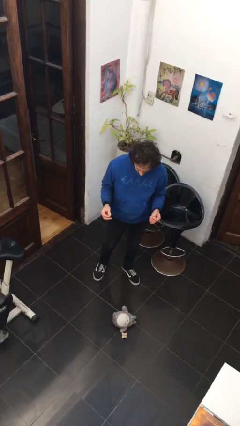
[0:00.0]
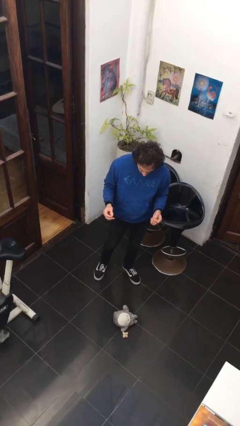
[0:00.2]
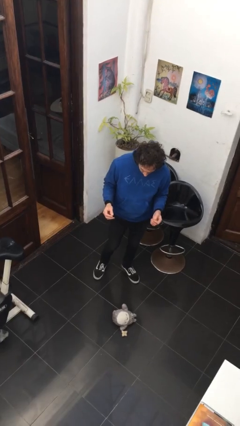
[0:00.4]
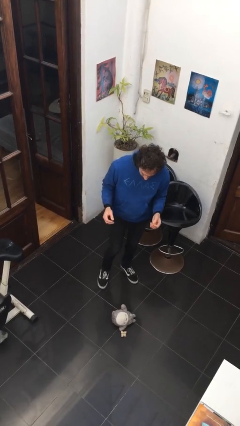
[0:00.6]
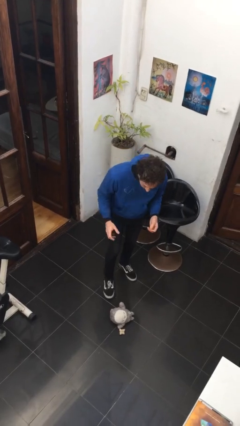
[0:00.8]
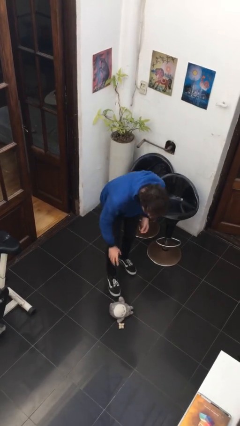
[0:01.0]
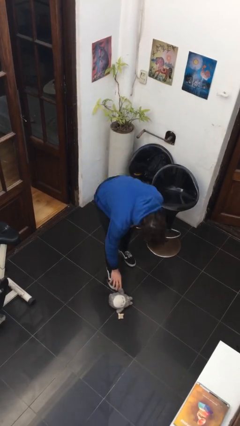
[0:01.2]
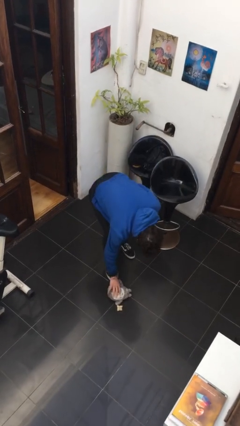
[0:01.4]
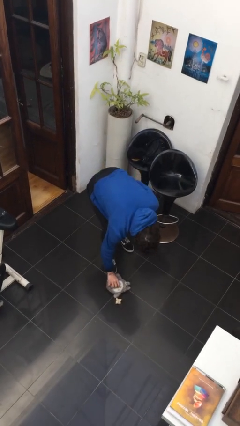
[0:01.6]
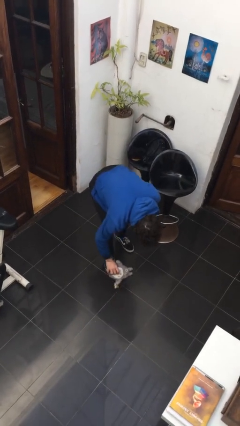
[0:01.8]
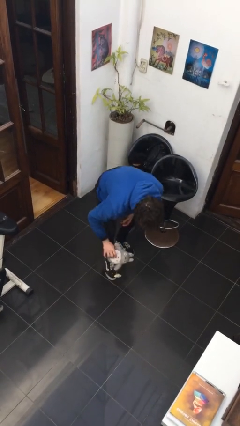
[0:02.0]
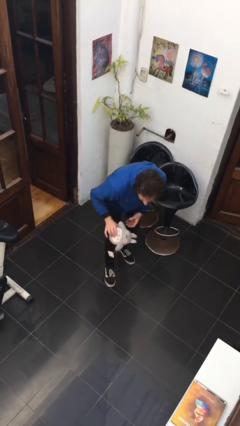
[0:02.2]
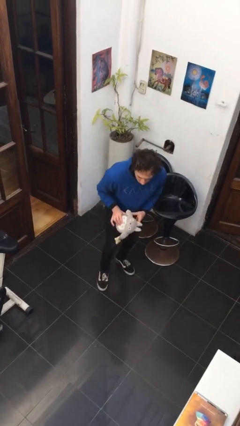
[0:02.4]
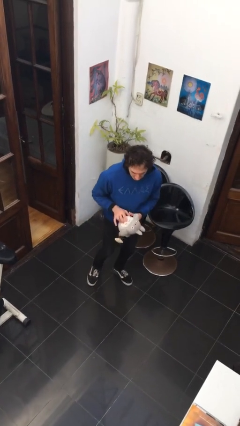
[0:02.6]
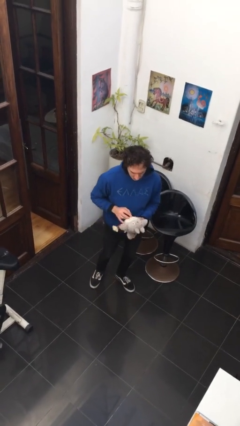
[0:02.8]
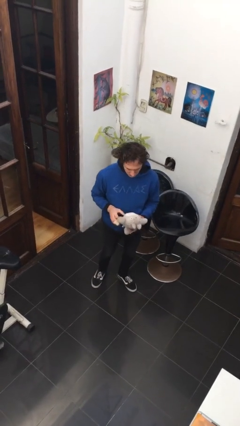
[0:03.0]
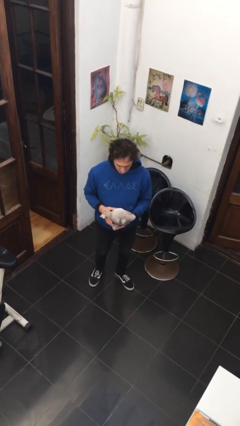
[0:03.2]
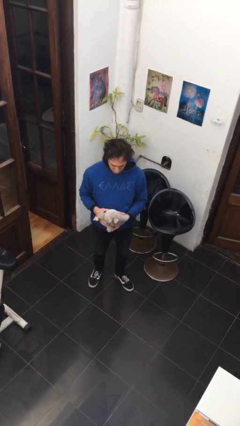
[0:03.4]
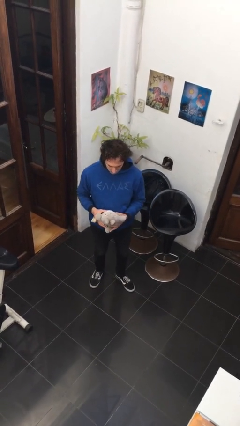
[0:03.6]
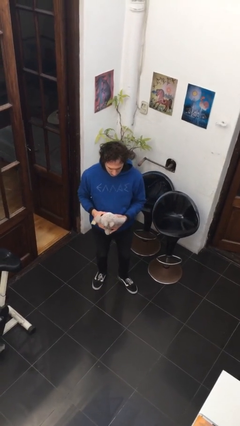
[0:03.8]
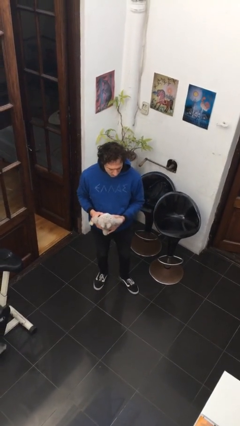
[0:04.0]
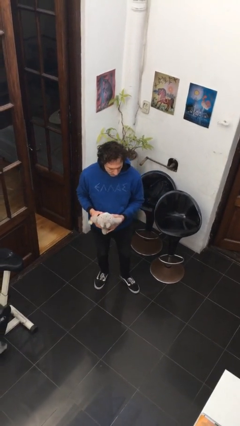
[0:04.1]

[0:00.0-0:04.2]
person picks up object from floor

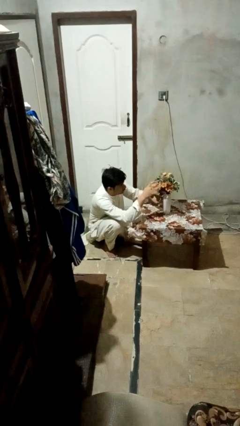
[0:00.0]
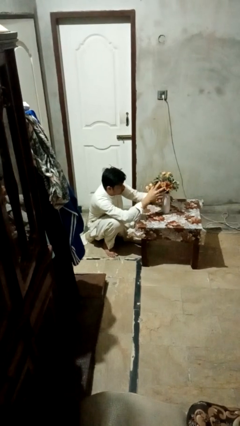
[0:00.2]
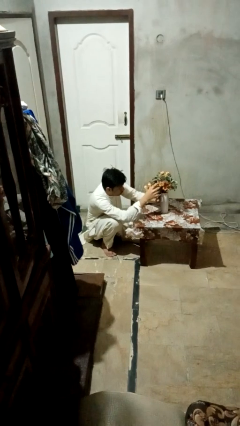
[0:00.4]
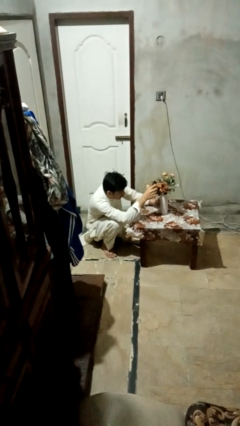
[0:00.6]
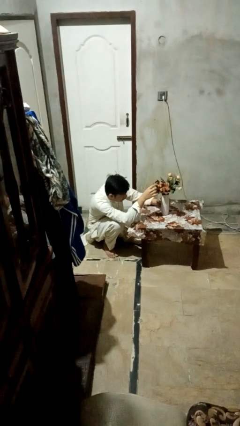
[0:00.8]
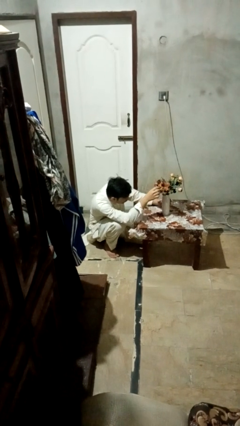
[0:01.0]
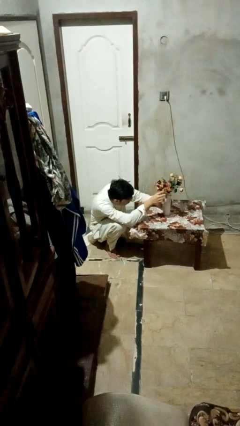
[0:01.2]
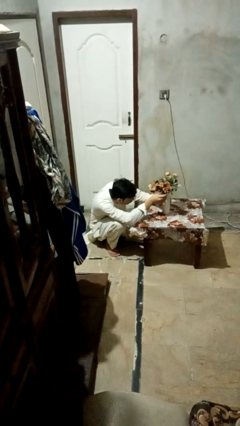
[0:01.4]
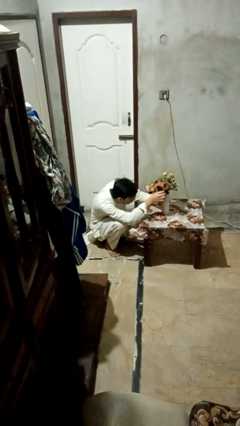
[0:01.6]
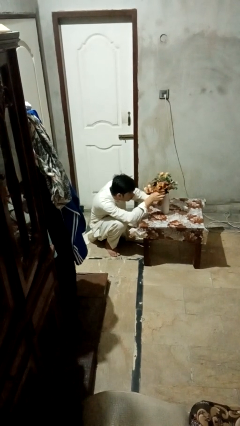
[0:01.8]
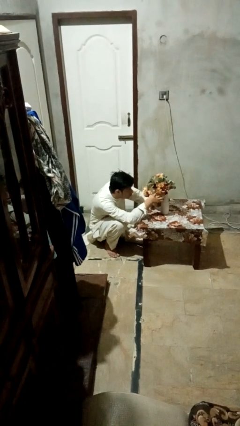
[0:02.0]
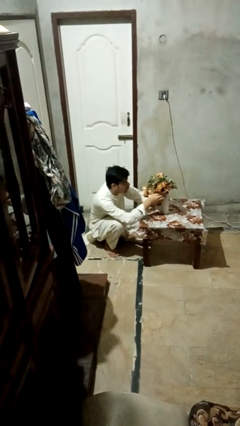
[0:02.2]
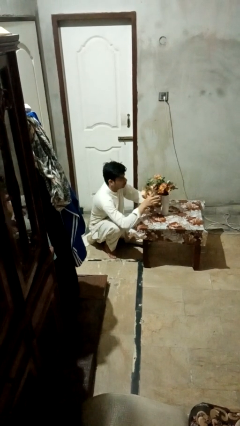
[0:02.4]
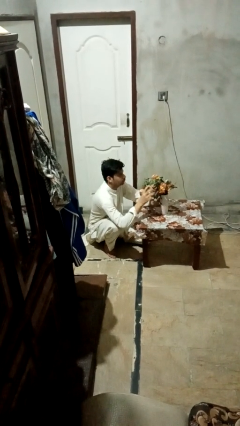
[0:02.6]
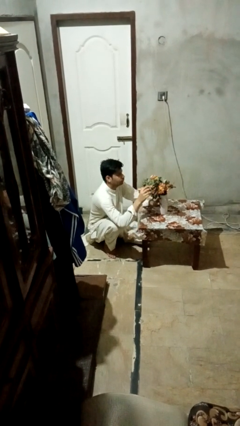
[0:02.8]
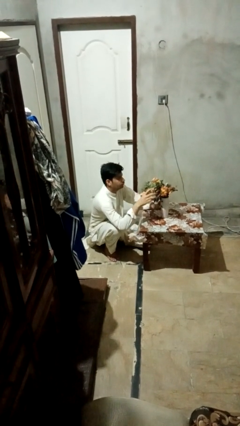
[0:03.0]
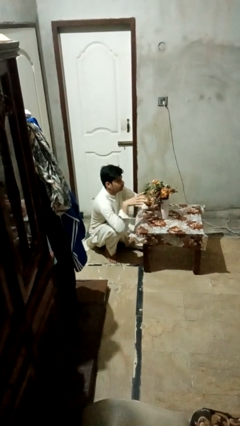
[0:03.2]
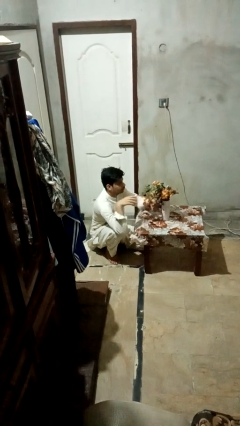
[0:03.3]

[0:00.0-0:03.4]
person arranges flowers in vase

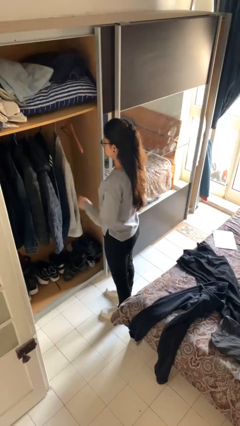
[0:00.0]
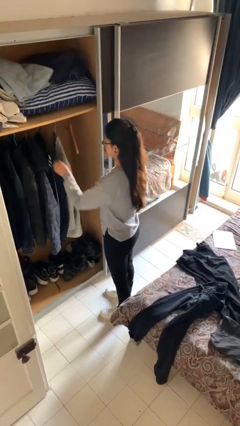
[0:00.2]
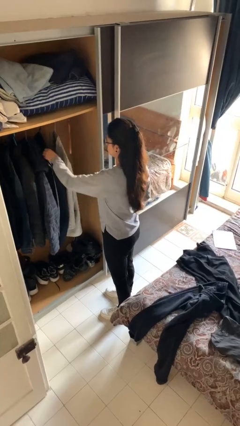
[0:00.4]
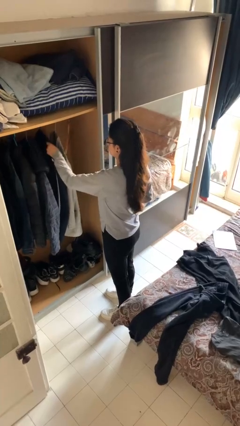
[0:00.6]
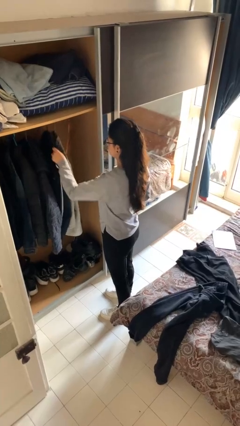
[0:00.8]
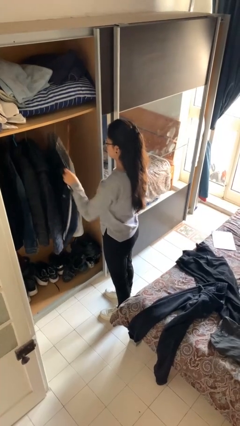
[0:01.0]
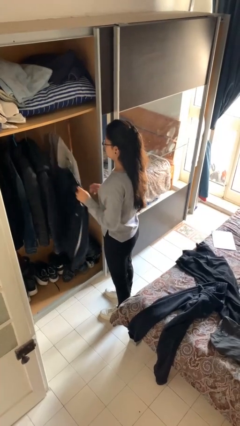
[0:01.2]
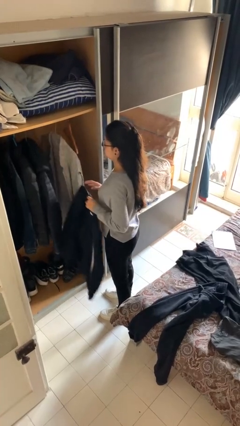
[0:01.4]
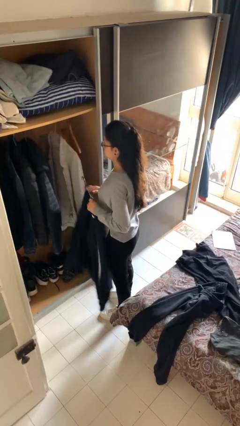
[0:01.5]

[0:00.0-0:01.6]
person takes clothes from closet

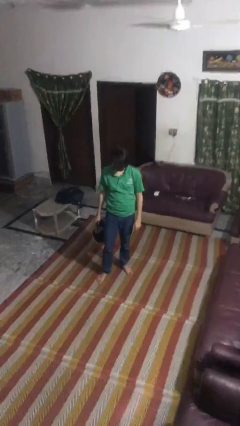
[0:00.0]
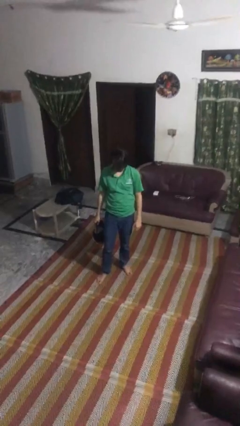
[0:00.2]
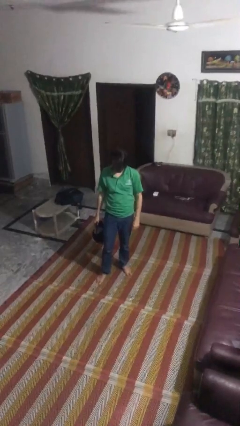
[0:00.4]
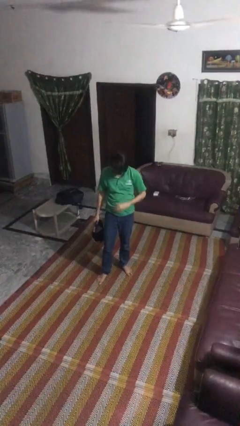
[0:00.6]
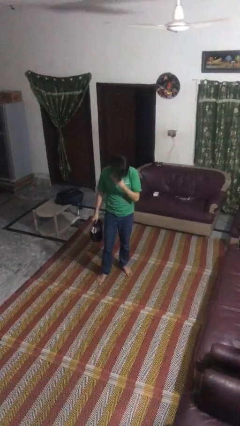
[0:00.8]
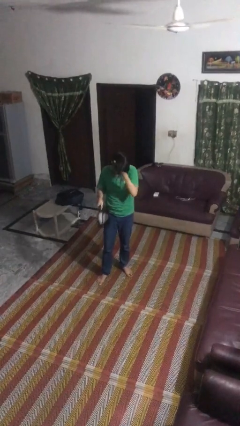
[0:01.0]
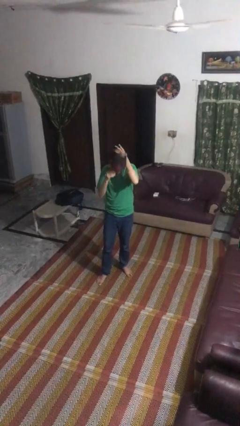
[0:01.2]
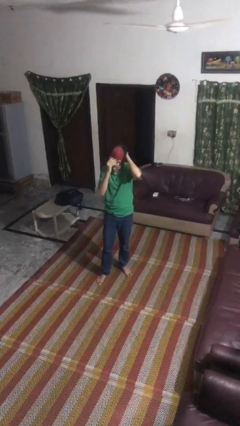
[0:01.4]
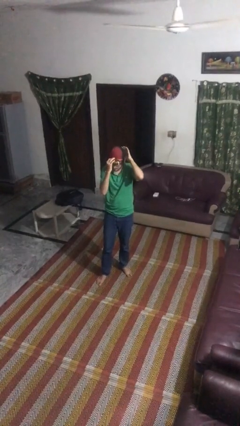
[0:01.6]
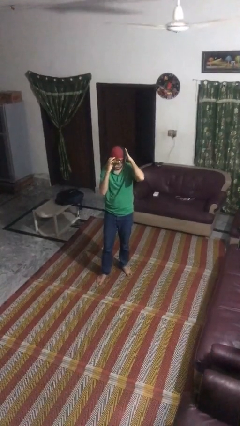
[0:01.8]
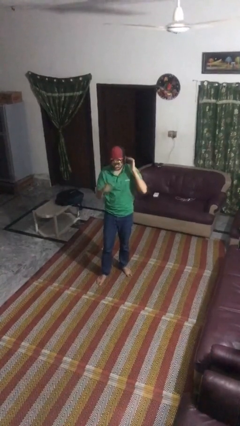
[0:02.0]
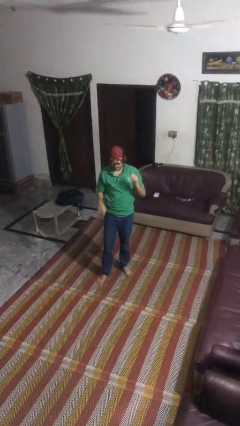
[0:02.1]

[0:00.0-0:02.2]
person puts on hat

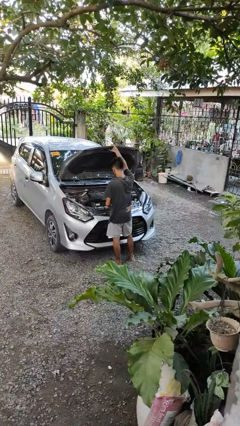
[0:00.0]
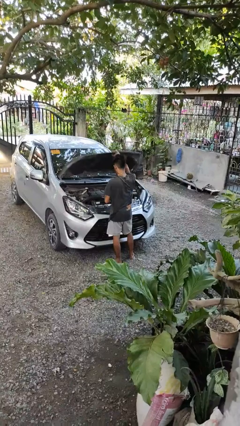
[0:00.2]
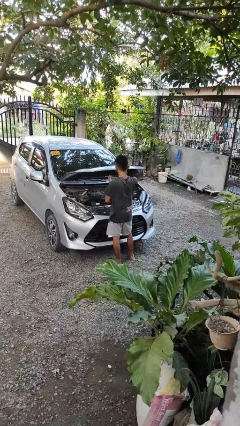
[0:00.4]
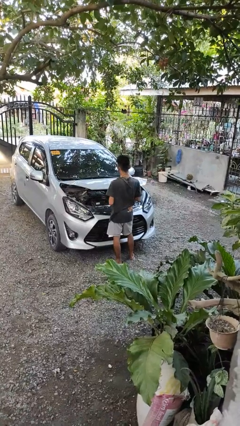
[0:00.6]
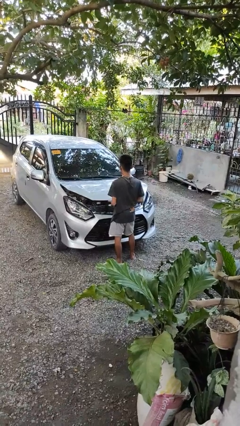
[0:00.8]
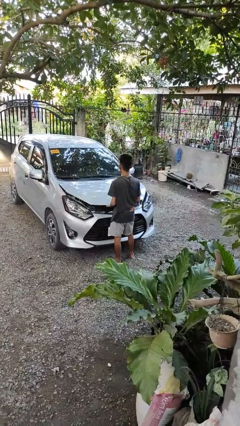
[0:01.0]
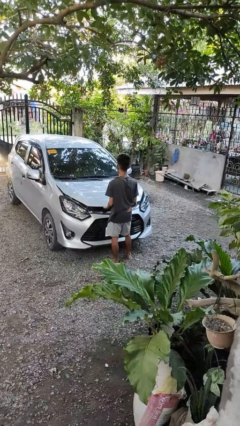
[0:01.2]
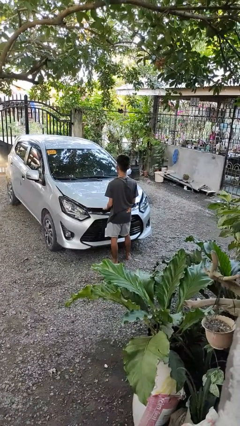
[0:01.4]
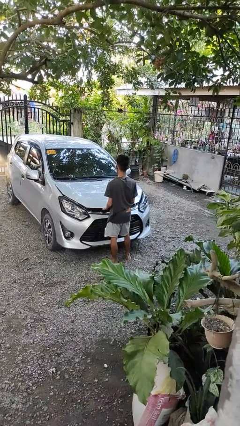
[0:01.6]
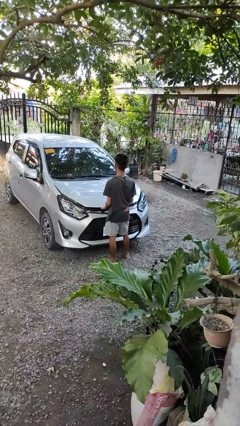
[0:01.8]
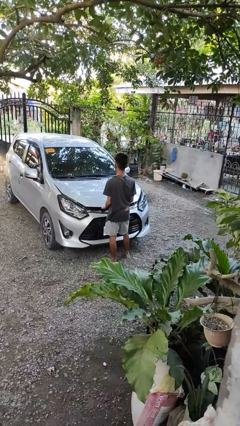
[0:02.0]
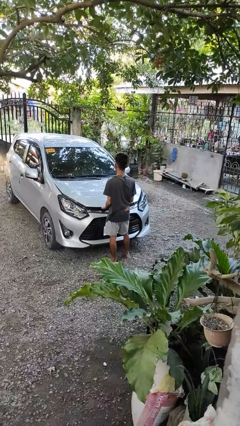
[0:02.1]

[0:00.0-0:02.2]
person closes car hood

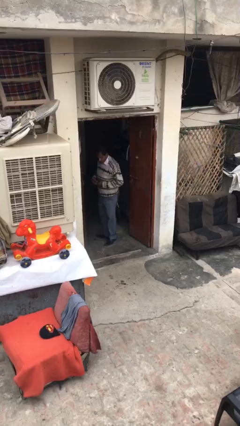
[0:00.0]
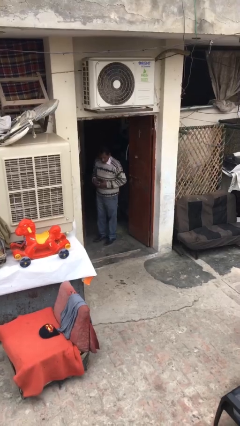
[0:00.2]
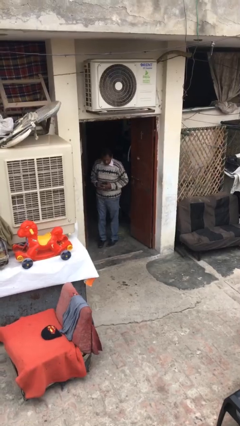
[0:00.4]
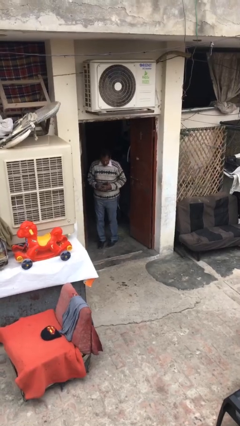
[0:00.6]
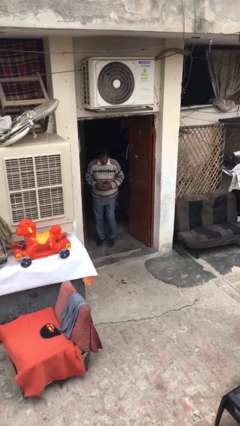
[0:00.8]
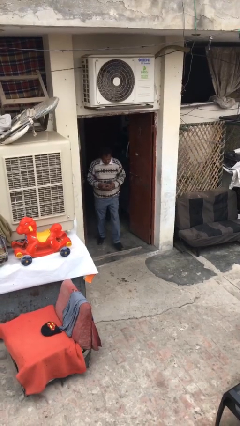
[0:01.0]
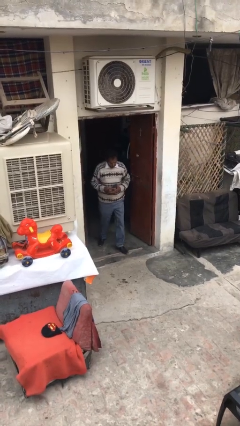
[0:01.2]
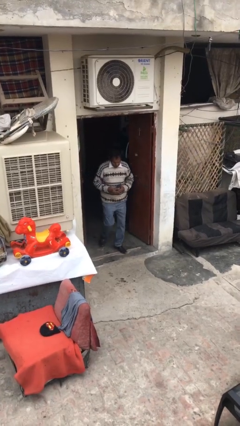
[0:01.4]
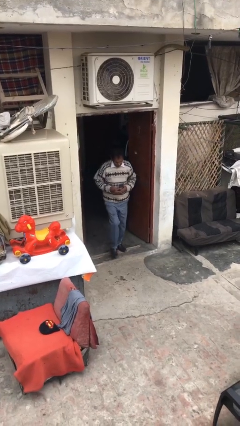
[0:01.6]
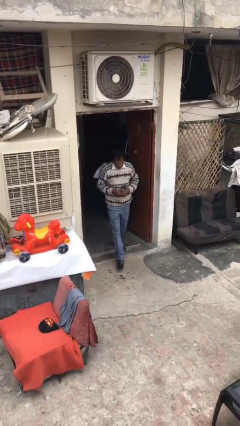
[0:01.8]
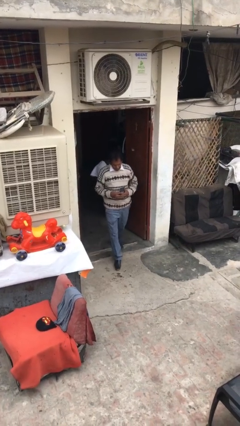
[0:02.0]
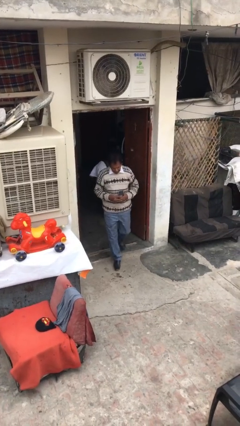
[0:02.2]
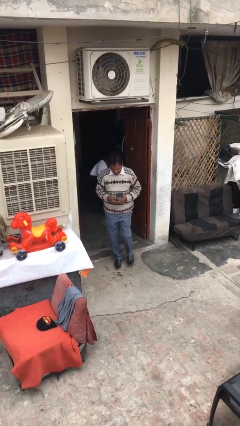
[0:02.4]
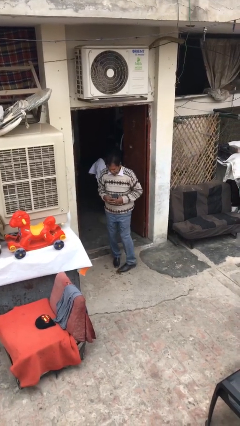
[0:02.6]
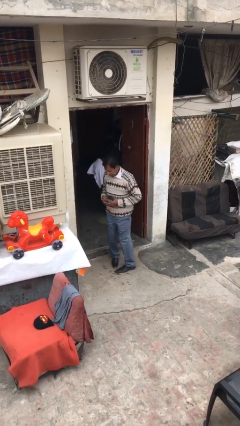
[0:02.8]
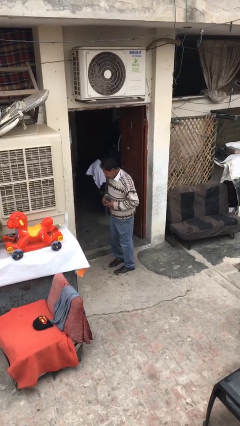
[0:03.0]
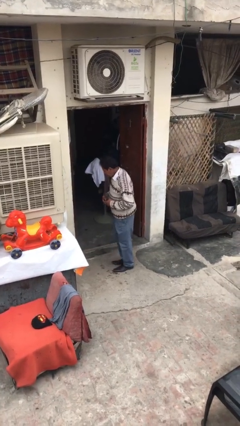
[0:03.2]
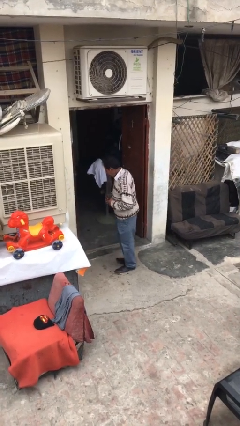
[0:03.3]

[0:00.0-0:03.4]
person enters scene through structure

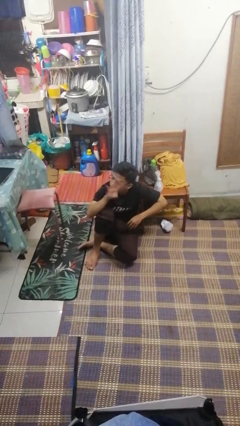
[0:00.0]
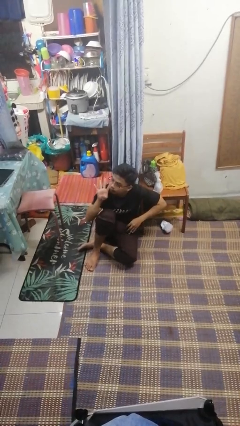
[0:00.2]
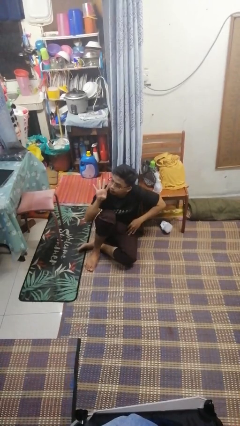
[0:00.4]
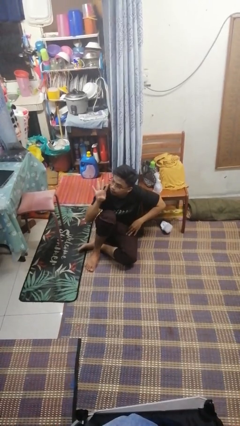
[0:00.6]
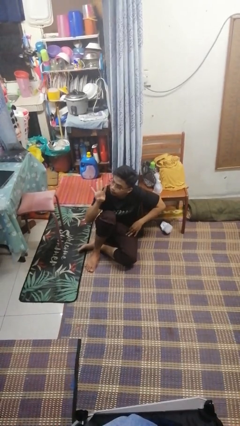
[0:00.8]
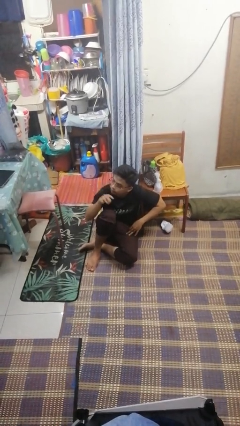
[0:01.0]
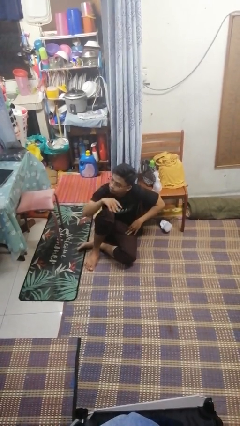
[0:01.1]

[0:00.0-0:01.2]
person gestures number four
